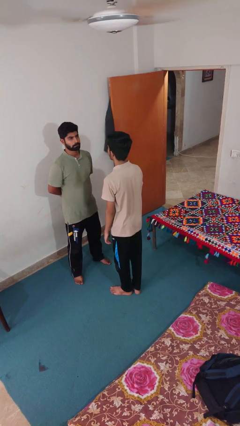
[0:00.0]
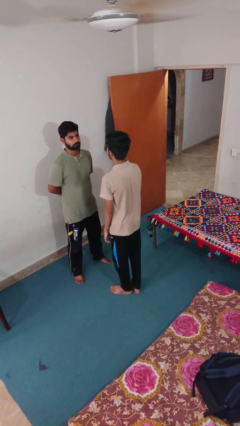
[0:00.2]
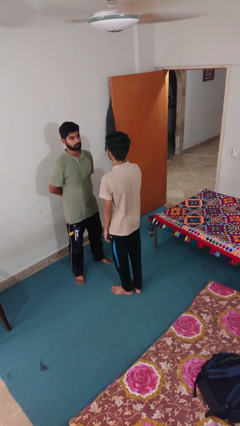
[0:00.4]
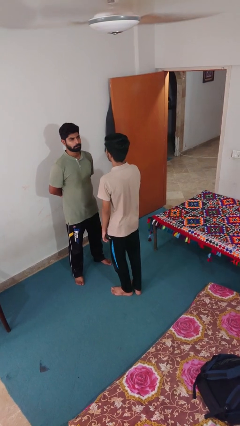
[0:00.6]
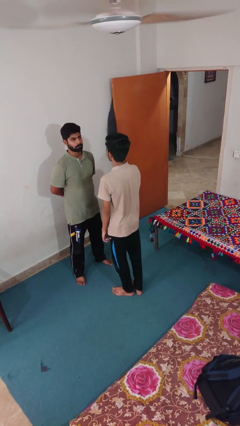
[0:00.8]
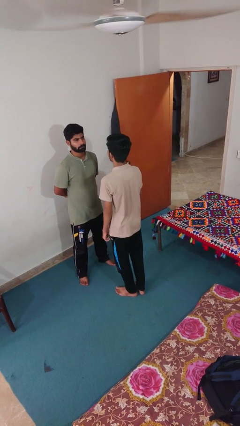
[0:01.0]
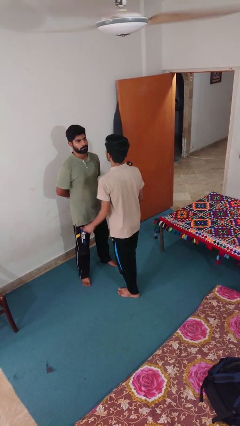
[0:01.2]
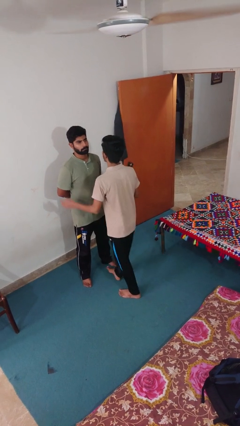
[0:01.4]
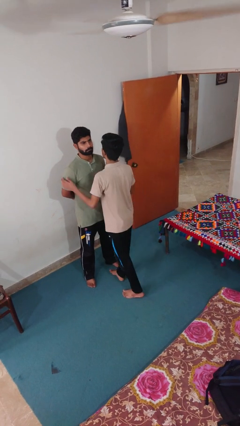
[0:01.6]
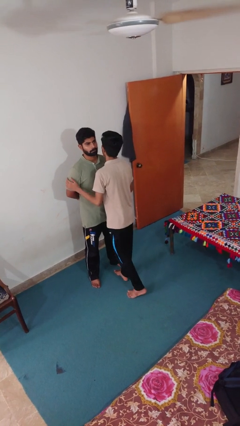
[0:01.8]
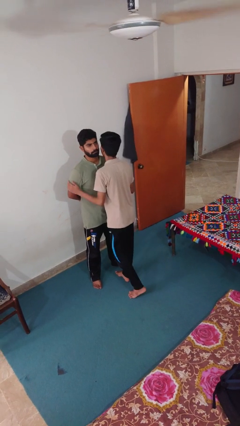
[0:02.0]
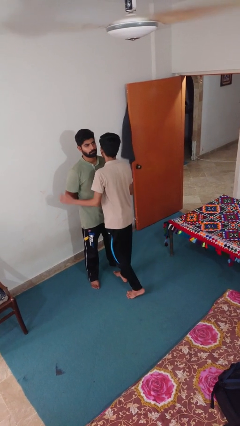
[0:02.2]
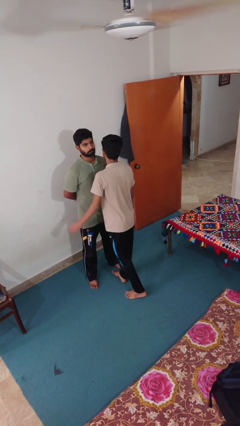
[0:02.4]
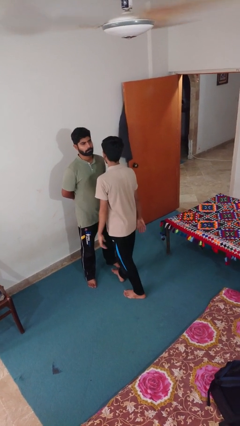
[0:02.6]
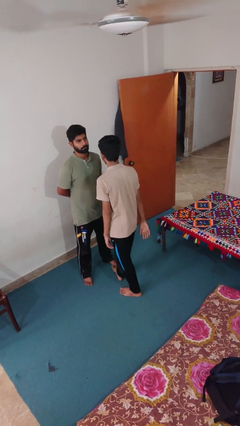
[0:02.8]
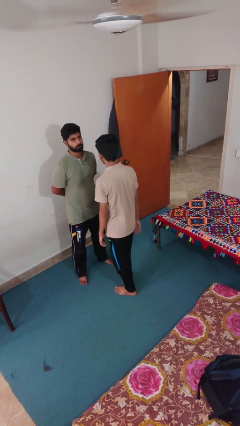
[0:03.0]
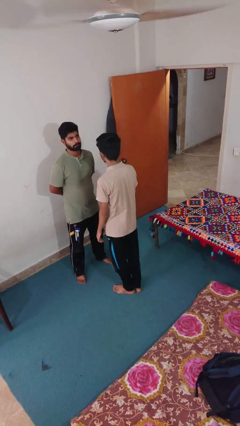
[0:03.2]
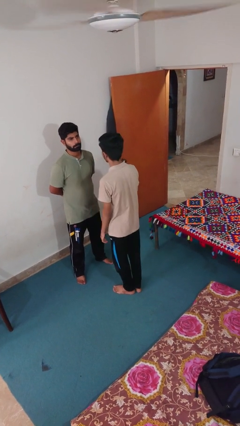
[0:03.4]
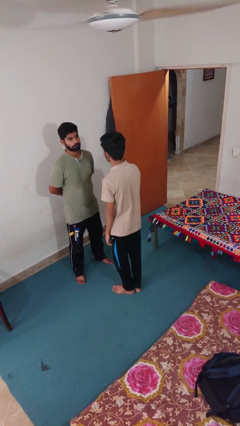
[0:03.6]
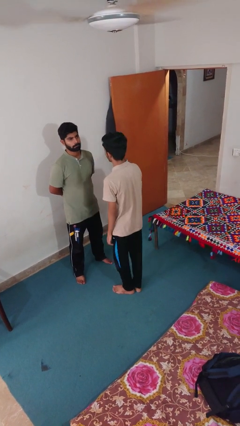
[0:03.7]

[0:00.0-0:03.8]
person kisses cheek of person

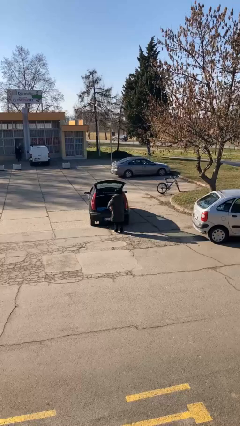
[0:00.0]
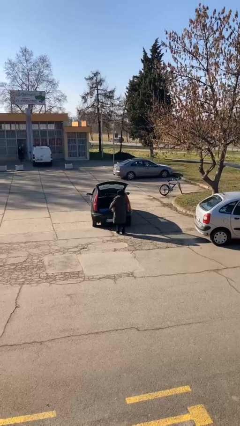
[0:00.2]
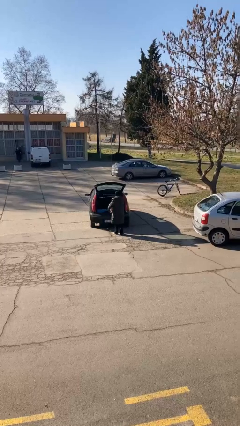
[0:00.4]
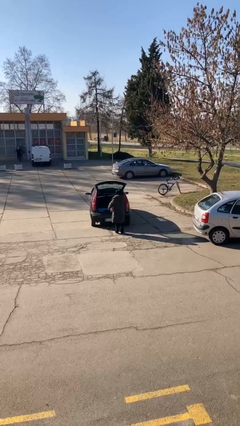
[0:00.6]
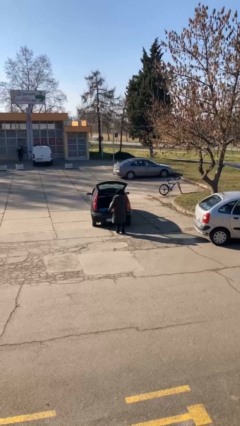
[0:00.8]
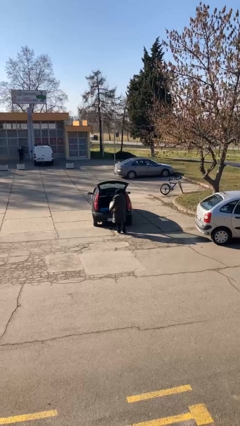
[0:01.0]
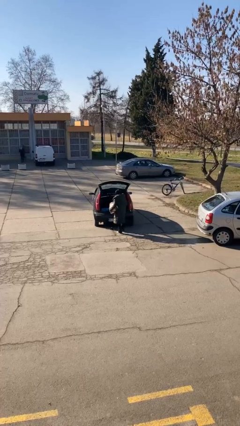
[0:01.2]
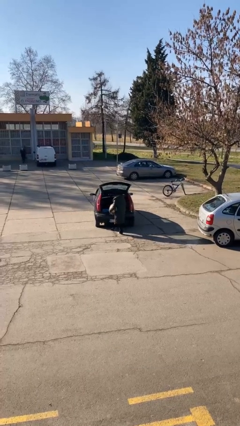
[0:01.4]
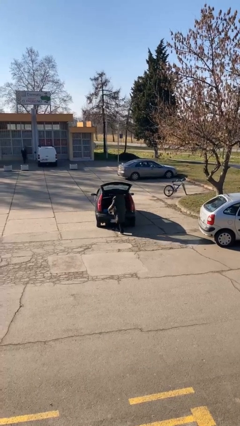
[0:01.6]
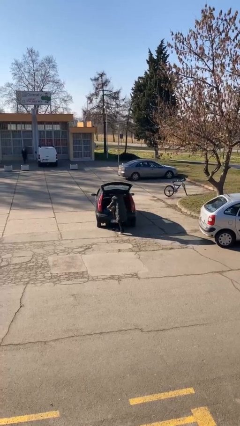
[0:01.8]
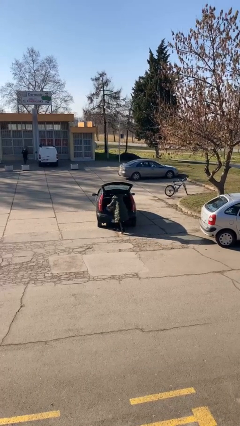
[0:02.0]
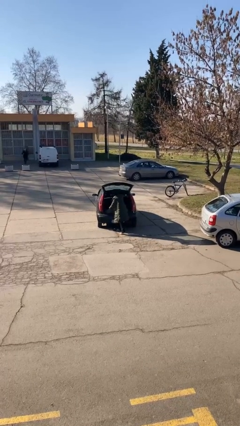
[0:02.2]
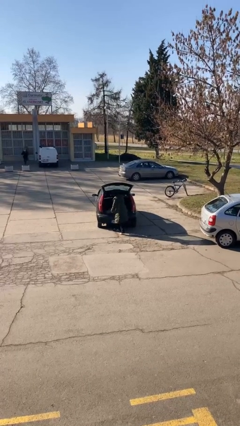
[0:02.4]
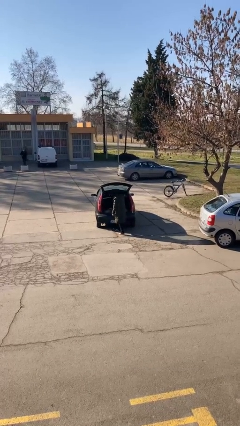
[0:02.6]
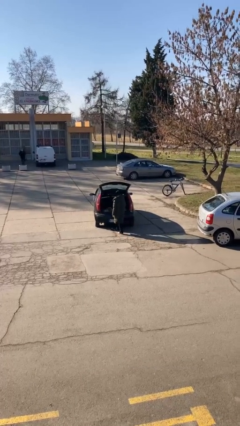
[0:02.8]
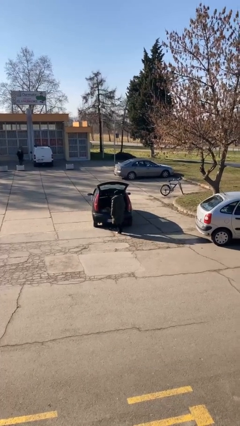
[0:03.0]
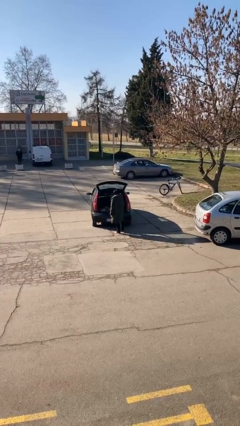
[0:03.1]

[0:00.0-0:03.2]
person loads car

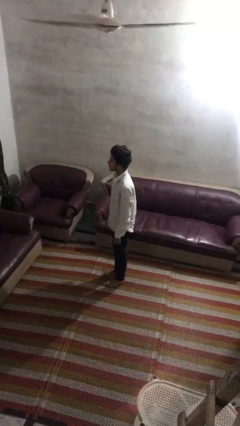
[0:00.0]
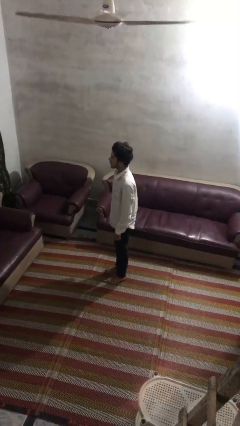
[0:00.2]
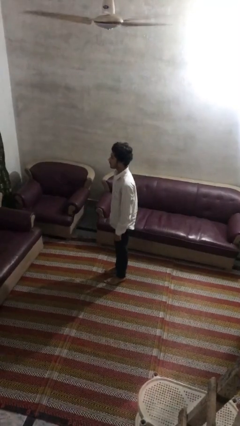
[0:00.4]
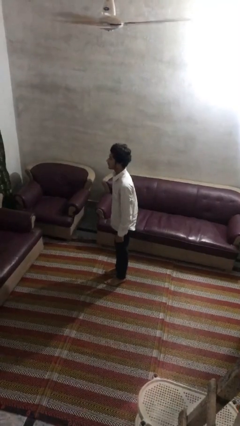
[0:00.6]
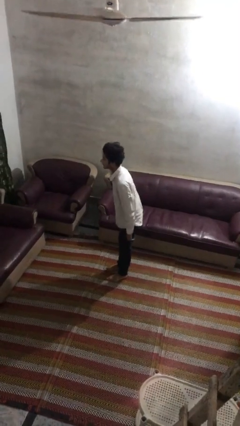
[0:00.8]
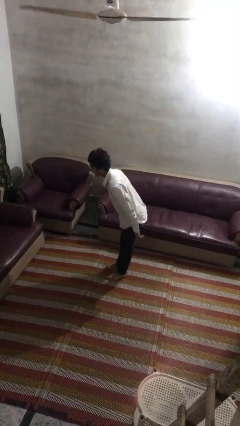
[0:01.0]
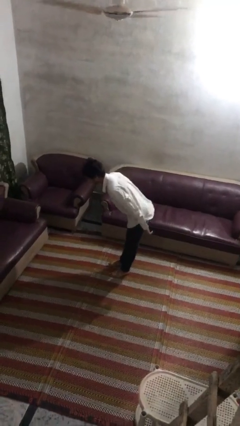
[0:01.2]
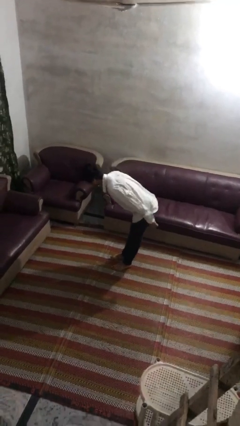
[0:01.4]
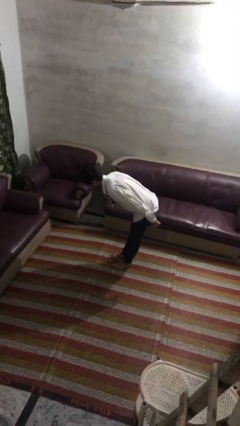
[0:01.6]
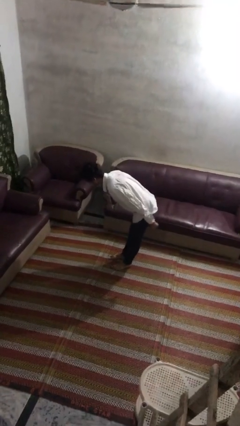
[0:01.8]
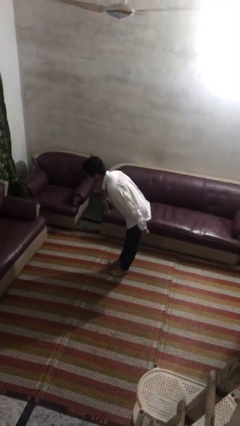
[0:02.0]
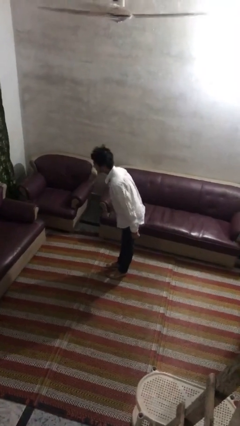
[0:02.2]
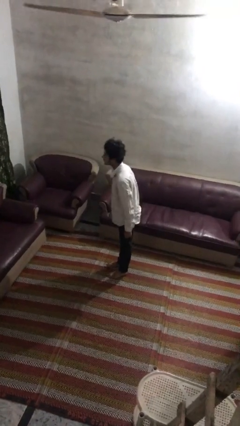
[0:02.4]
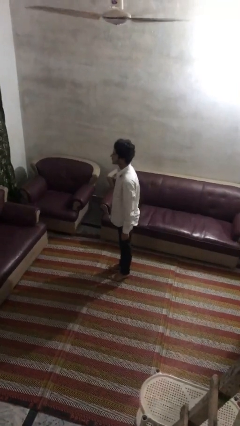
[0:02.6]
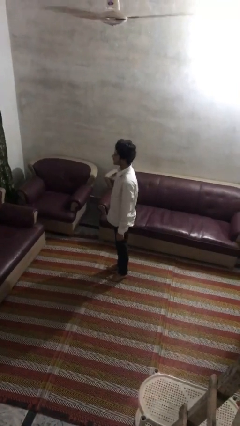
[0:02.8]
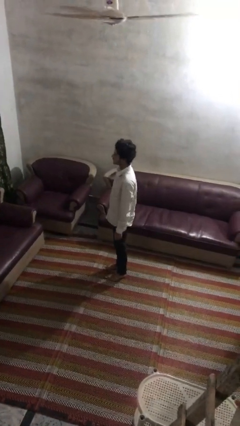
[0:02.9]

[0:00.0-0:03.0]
person bows

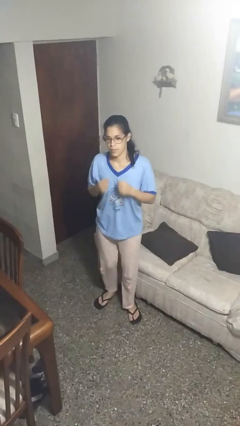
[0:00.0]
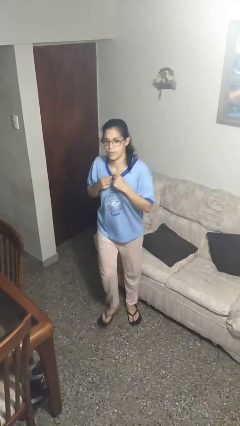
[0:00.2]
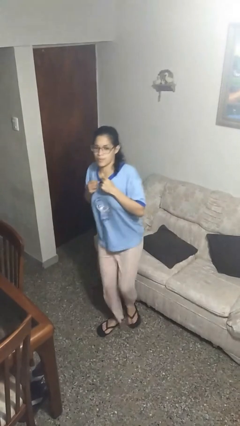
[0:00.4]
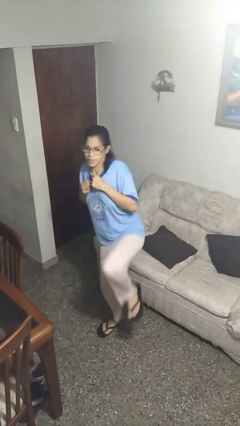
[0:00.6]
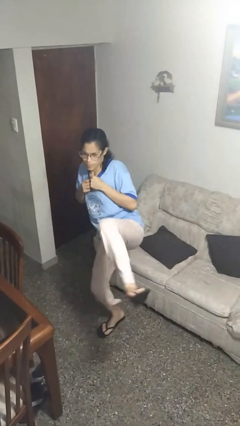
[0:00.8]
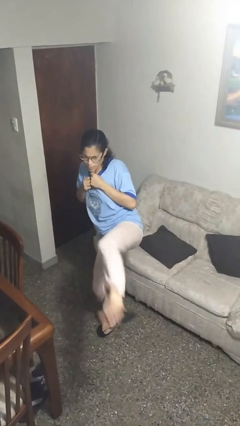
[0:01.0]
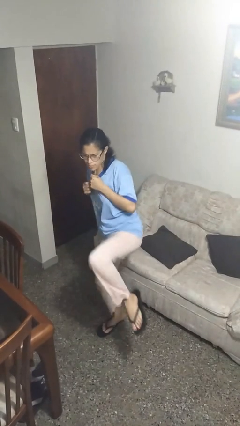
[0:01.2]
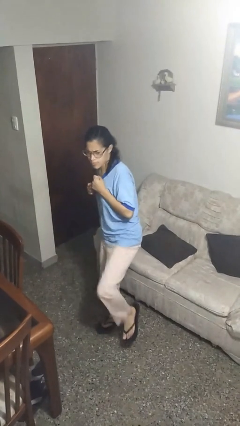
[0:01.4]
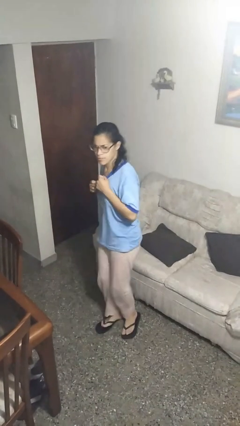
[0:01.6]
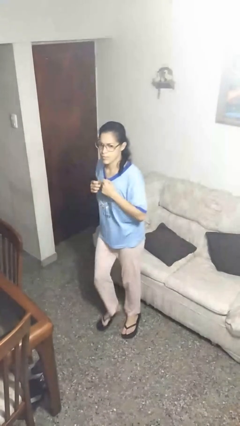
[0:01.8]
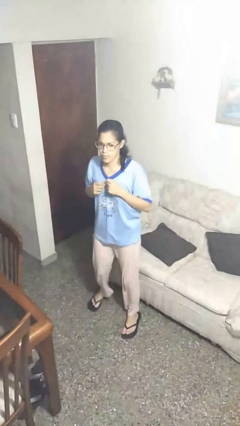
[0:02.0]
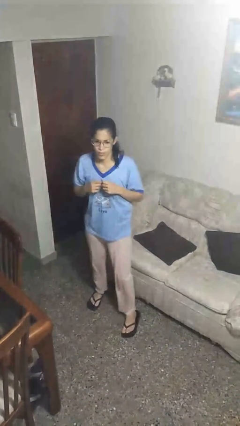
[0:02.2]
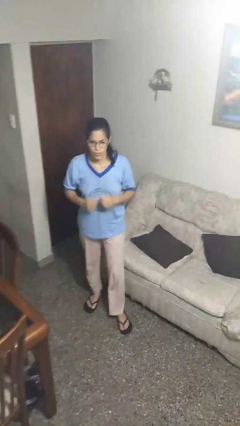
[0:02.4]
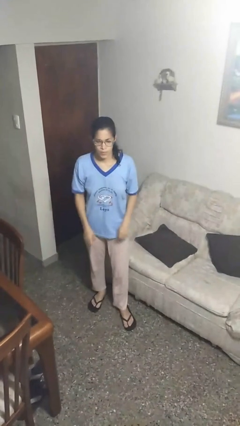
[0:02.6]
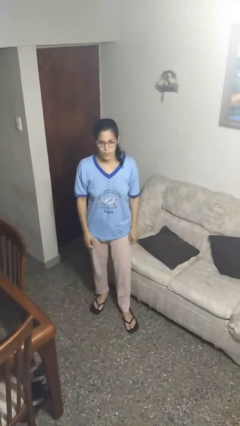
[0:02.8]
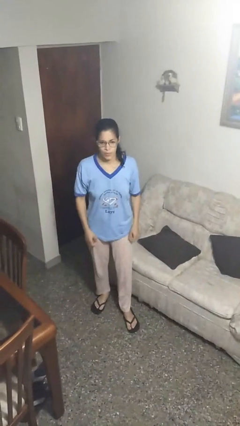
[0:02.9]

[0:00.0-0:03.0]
person karate kicks

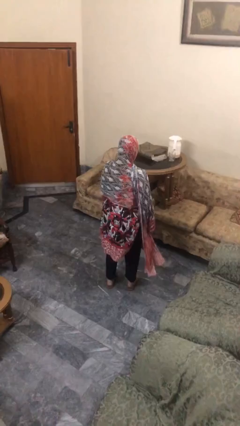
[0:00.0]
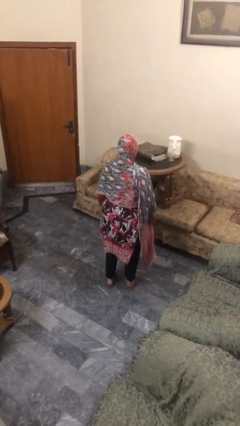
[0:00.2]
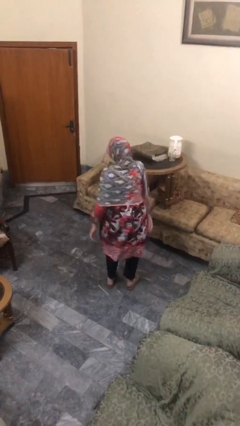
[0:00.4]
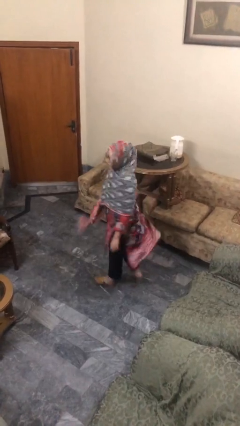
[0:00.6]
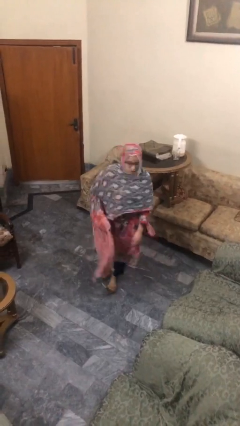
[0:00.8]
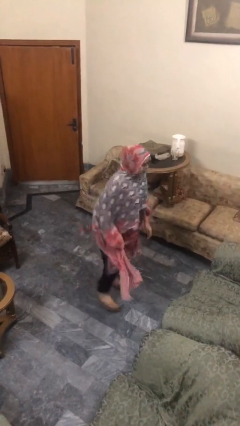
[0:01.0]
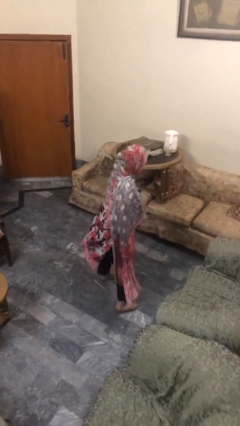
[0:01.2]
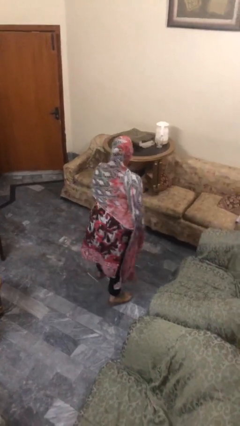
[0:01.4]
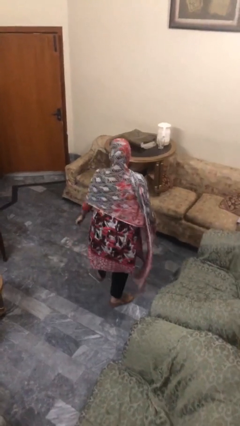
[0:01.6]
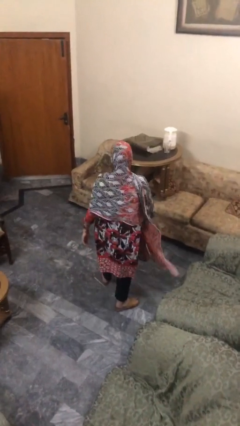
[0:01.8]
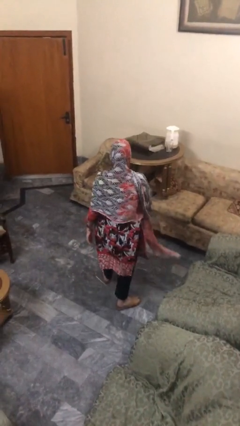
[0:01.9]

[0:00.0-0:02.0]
person twirls

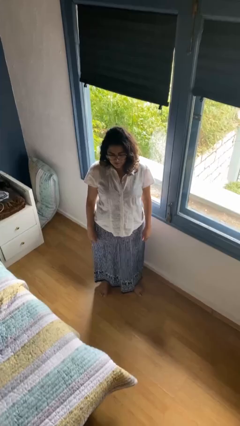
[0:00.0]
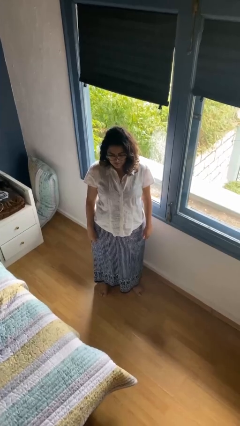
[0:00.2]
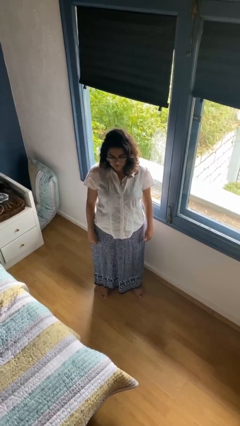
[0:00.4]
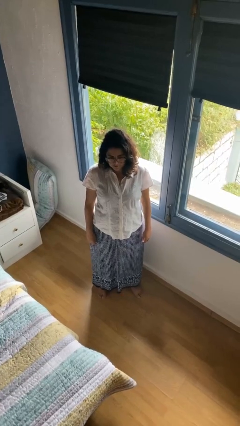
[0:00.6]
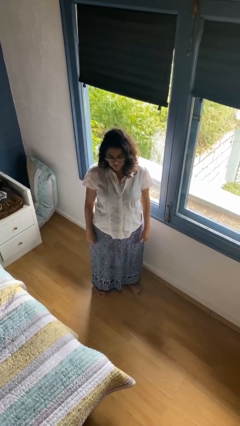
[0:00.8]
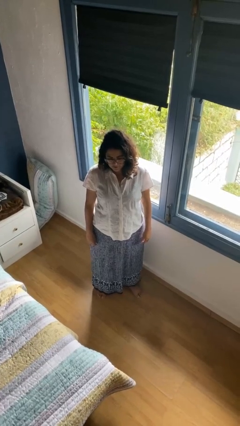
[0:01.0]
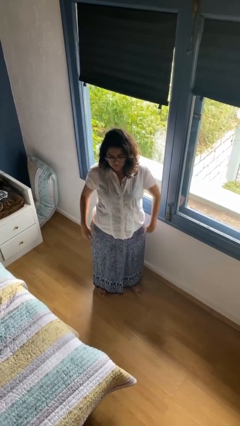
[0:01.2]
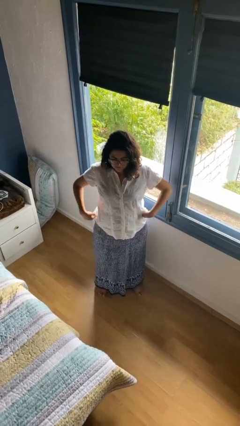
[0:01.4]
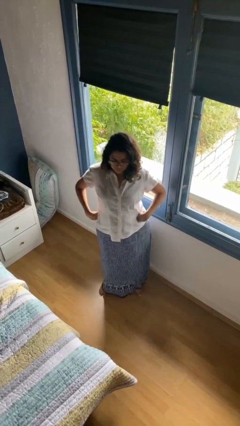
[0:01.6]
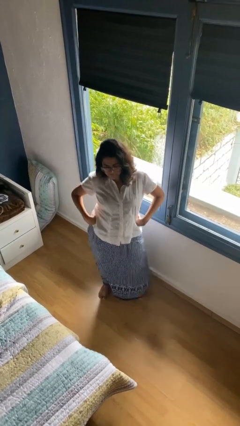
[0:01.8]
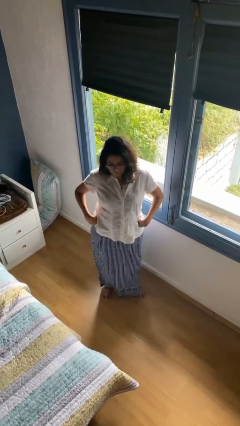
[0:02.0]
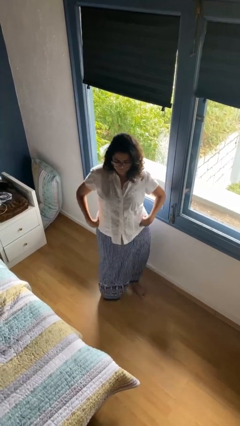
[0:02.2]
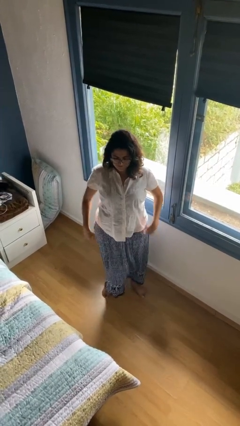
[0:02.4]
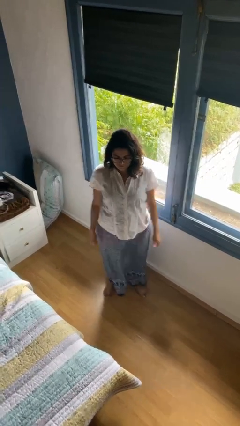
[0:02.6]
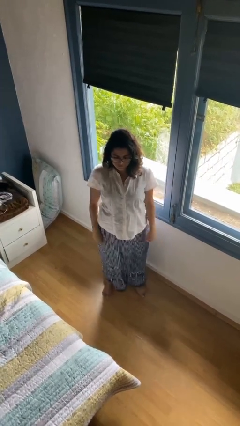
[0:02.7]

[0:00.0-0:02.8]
person wiggles hips
